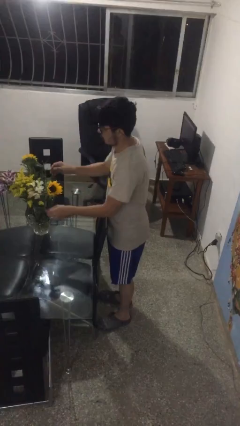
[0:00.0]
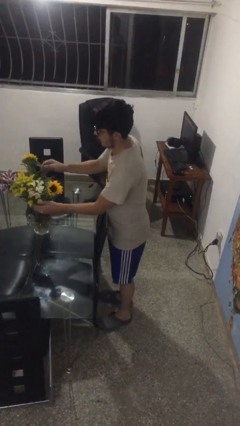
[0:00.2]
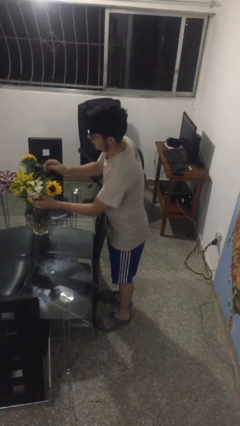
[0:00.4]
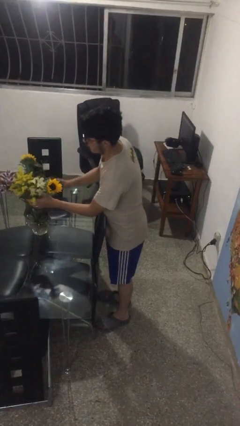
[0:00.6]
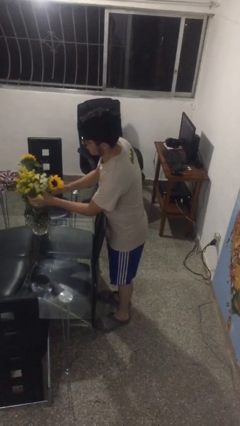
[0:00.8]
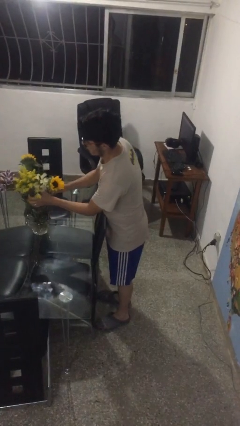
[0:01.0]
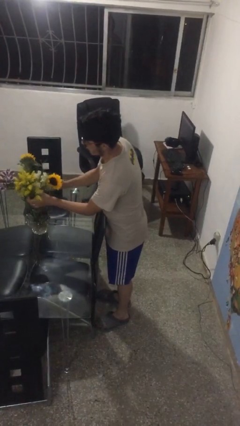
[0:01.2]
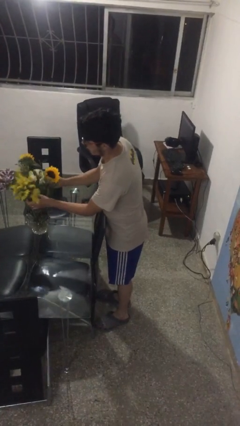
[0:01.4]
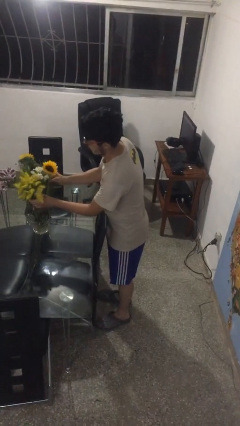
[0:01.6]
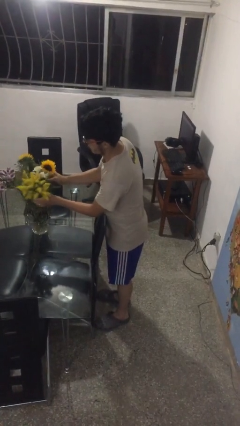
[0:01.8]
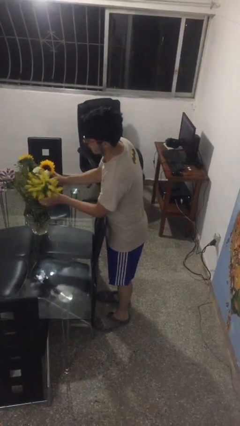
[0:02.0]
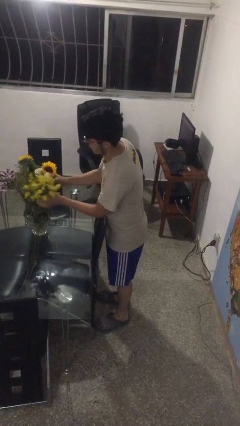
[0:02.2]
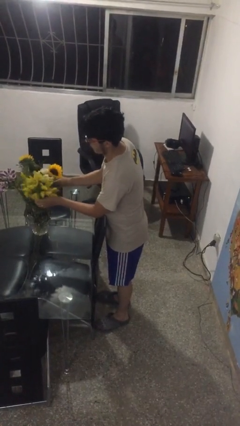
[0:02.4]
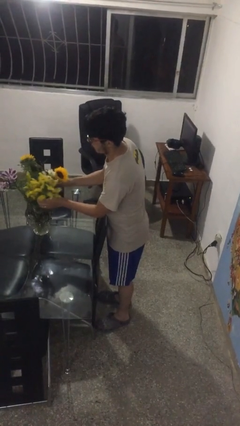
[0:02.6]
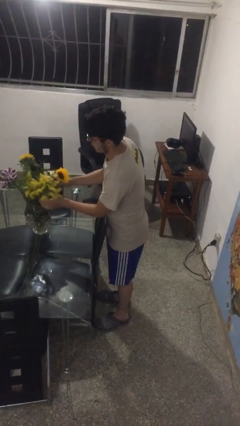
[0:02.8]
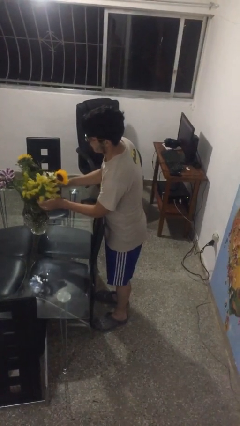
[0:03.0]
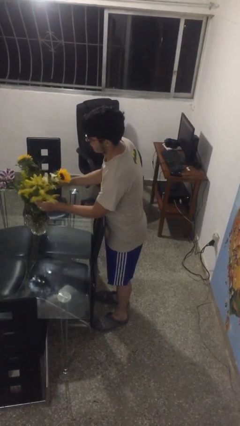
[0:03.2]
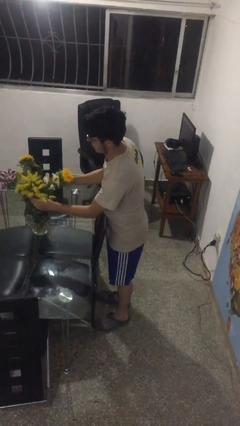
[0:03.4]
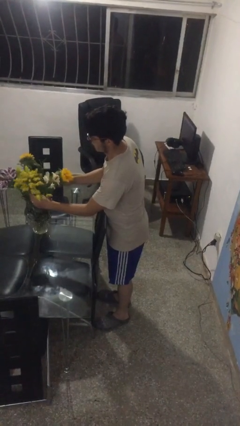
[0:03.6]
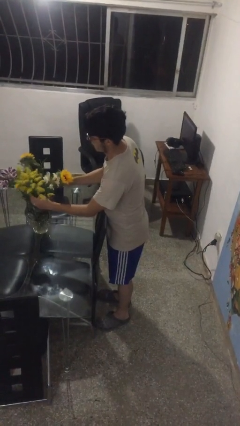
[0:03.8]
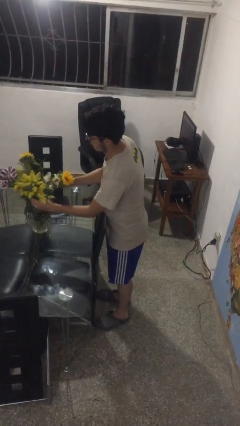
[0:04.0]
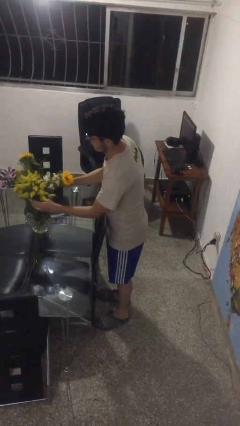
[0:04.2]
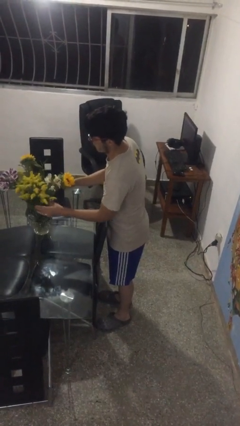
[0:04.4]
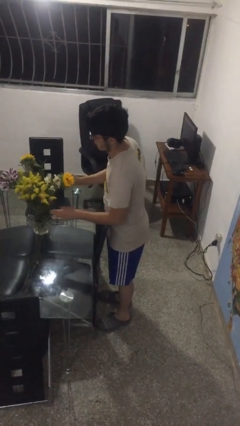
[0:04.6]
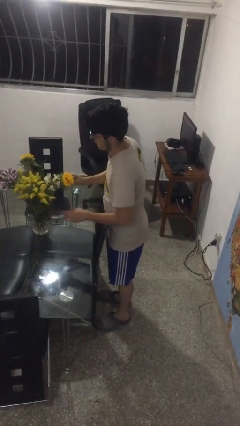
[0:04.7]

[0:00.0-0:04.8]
person arranges flowers in vase

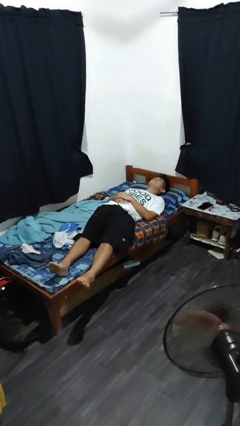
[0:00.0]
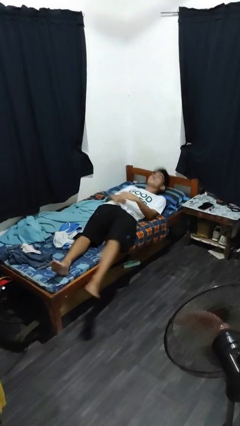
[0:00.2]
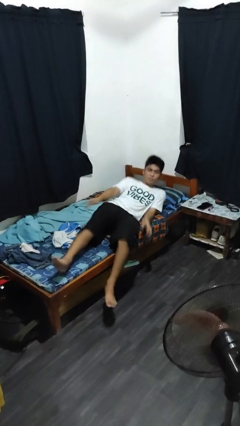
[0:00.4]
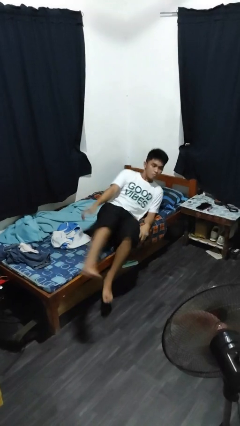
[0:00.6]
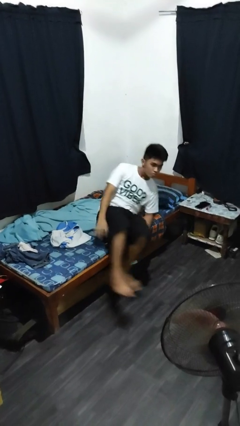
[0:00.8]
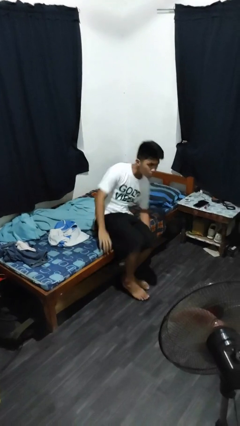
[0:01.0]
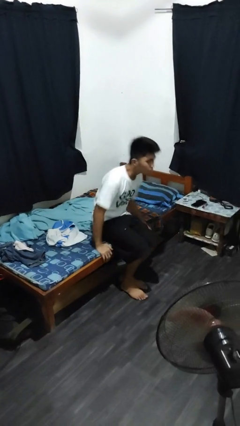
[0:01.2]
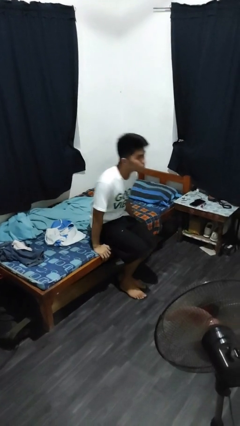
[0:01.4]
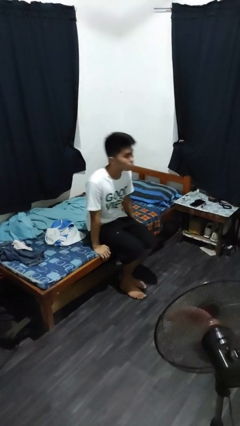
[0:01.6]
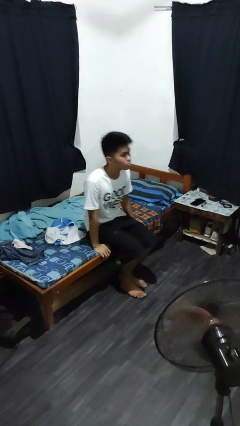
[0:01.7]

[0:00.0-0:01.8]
person stands up

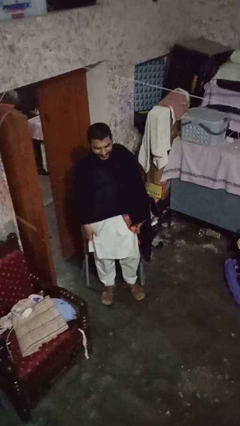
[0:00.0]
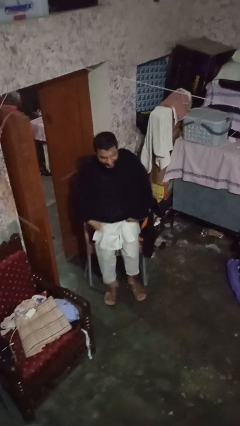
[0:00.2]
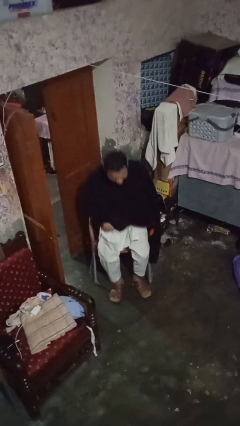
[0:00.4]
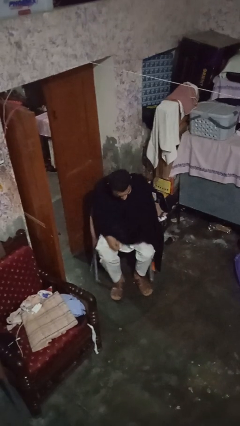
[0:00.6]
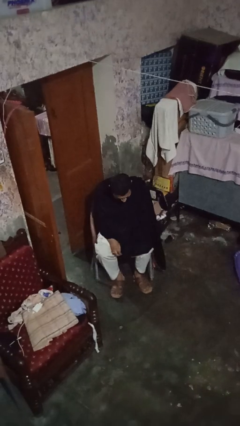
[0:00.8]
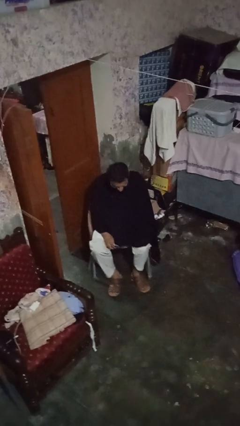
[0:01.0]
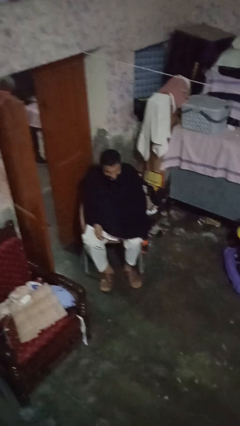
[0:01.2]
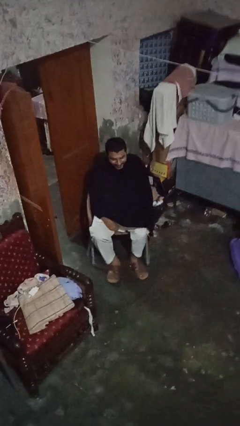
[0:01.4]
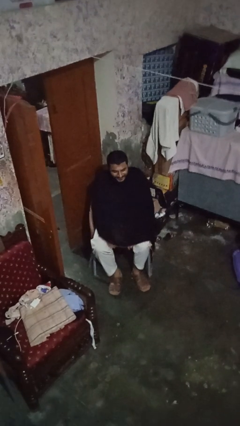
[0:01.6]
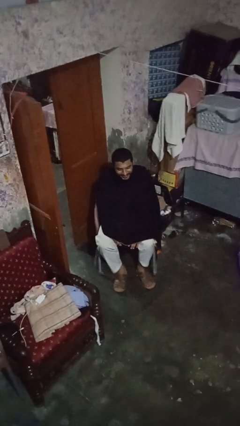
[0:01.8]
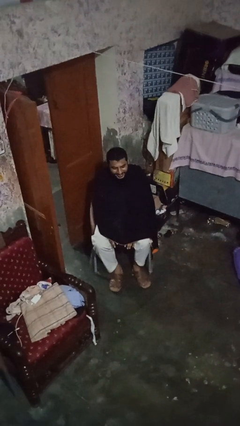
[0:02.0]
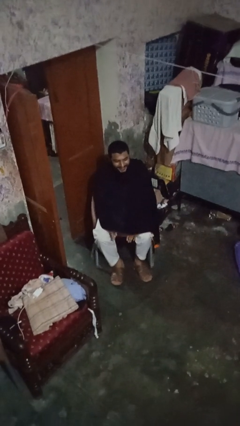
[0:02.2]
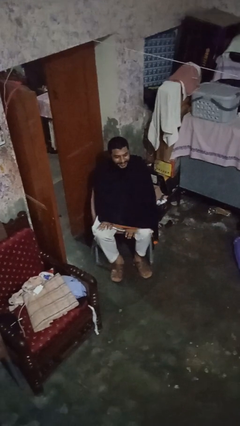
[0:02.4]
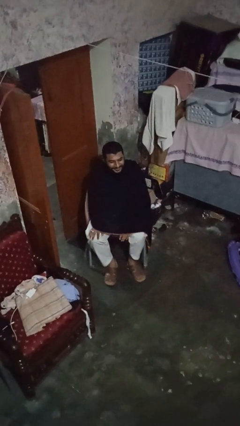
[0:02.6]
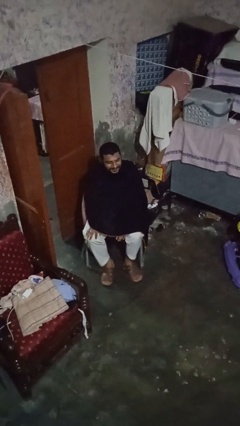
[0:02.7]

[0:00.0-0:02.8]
person sits down

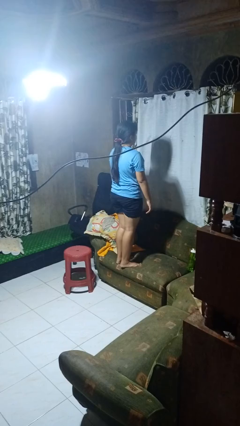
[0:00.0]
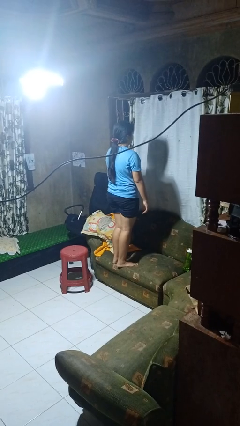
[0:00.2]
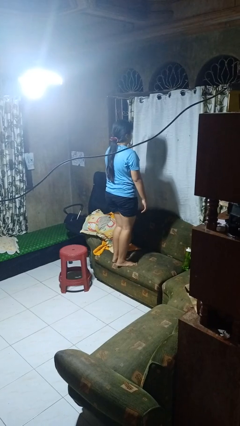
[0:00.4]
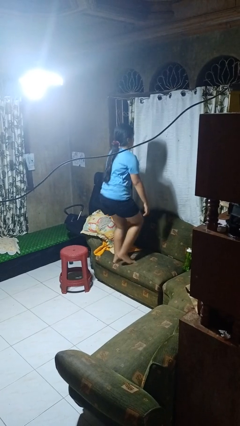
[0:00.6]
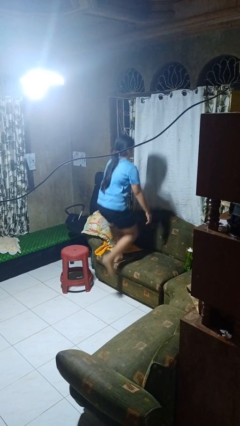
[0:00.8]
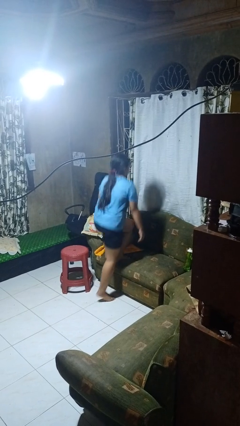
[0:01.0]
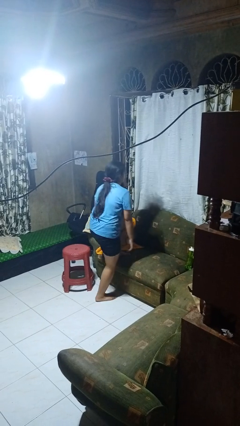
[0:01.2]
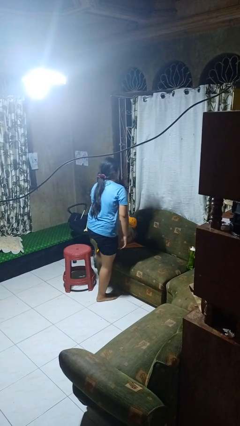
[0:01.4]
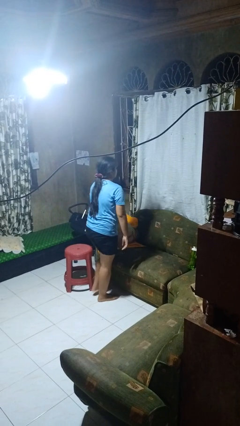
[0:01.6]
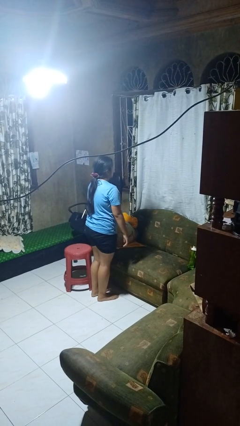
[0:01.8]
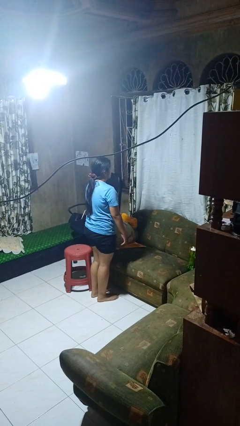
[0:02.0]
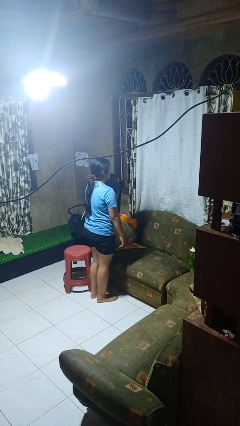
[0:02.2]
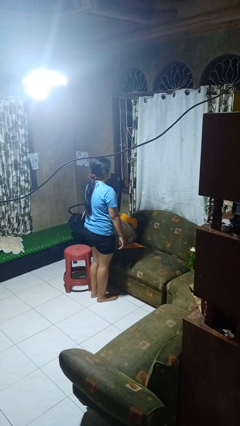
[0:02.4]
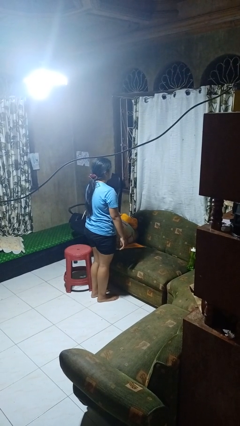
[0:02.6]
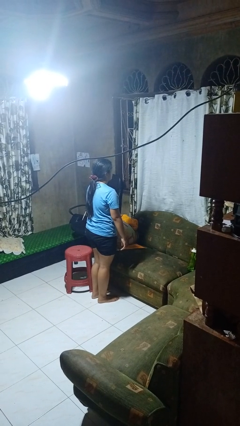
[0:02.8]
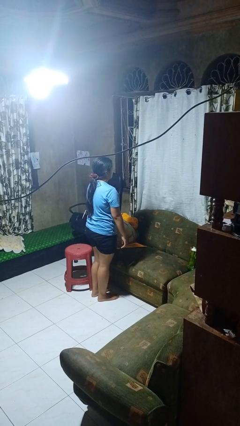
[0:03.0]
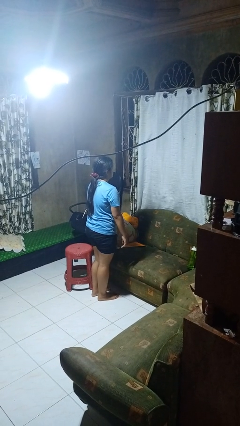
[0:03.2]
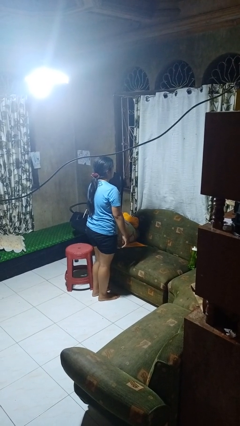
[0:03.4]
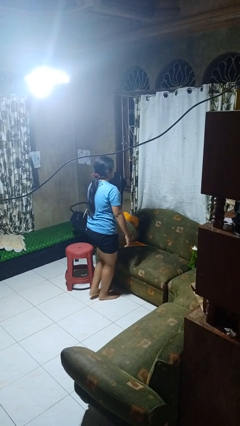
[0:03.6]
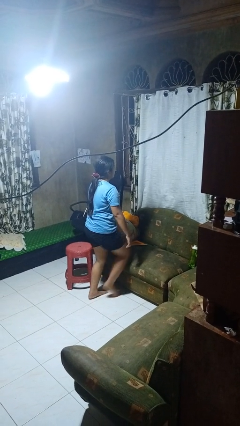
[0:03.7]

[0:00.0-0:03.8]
person climbs off couch

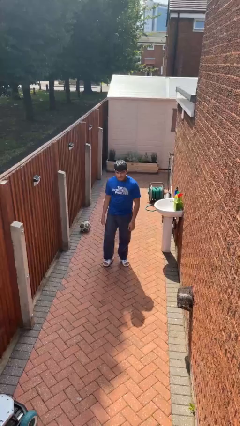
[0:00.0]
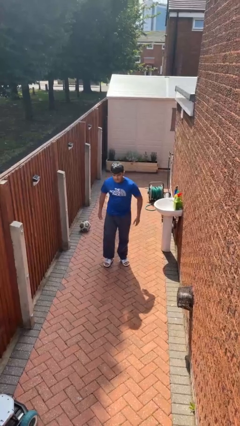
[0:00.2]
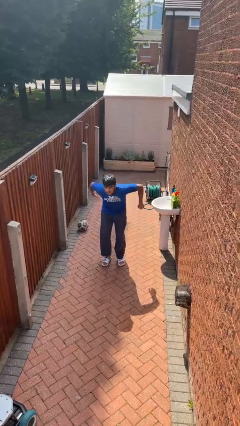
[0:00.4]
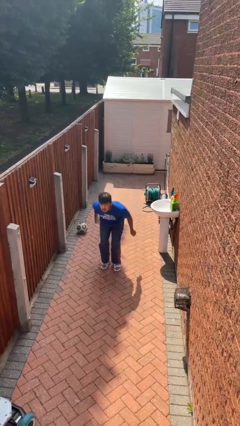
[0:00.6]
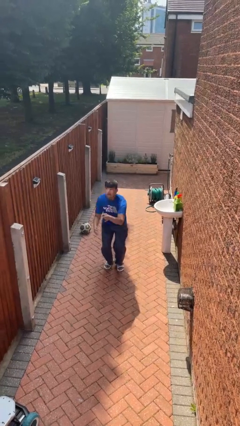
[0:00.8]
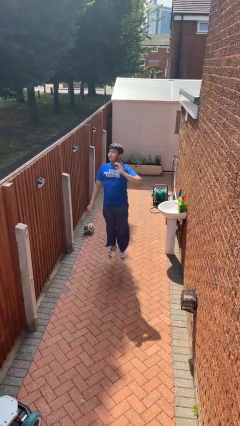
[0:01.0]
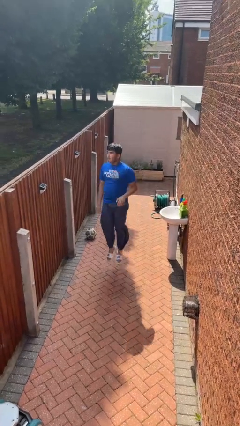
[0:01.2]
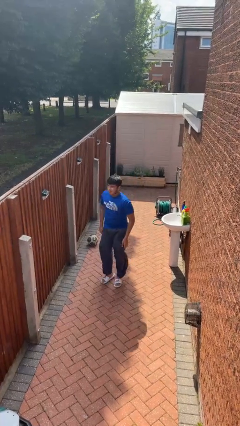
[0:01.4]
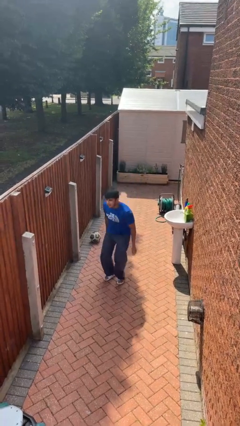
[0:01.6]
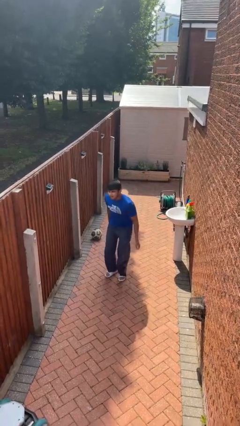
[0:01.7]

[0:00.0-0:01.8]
person jumps

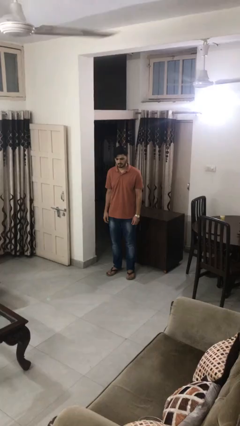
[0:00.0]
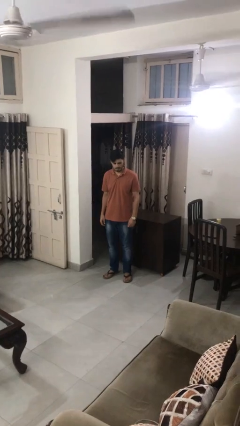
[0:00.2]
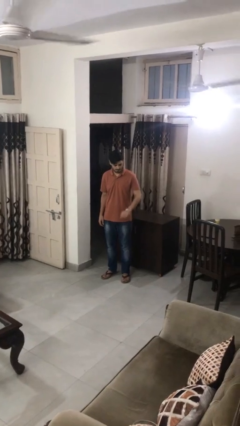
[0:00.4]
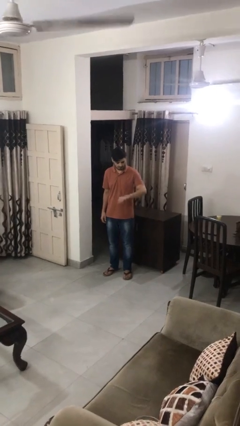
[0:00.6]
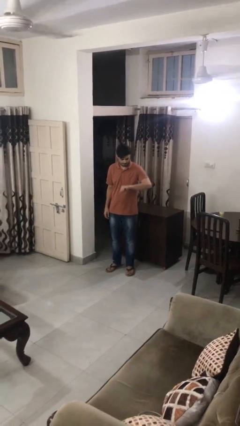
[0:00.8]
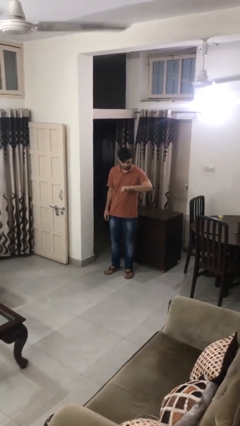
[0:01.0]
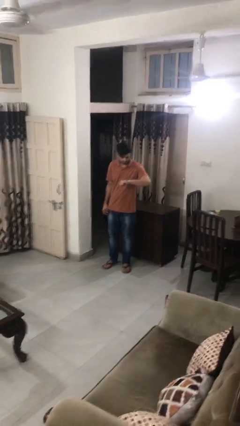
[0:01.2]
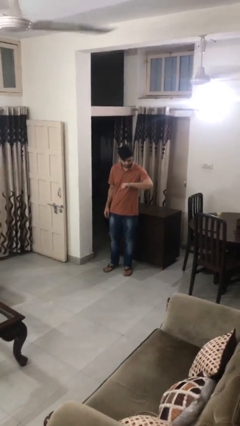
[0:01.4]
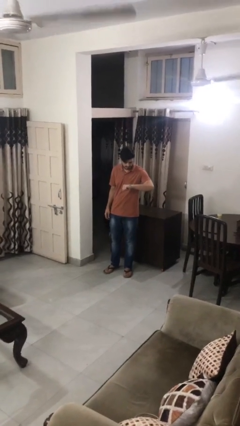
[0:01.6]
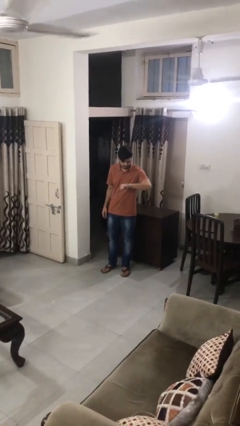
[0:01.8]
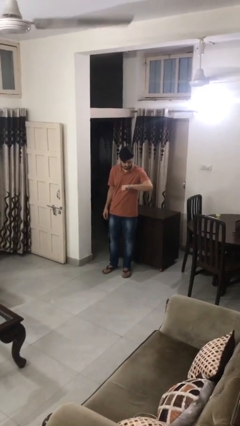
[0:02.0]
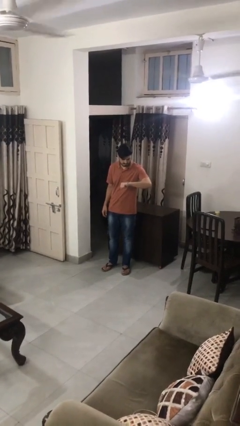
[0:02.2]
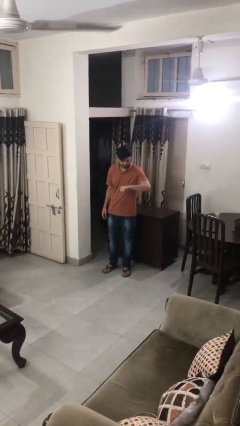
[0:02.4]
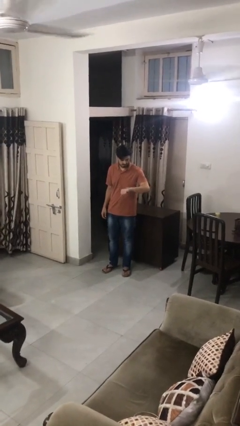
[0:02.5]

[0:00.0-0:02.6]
person looks at wristwatch
